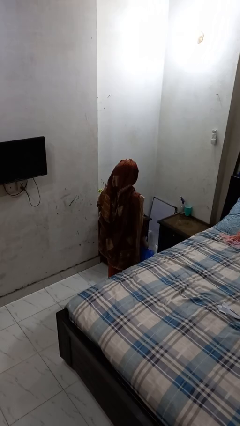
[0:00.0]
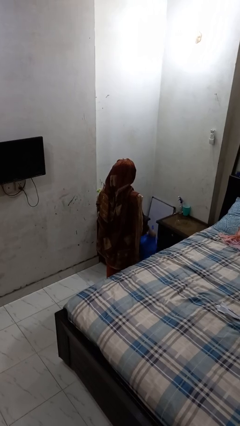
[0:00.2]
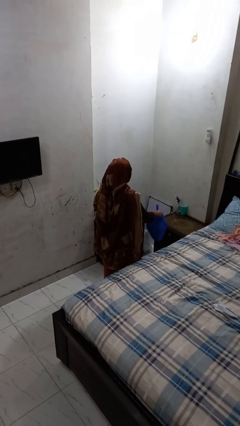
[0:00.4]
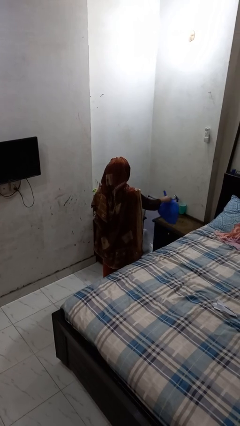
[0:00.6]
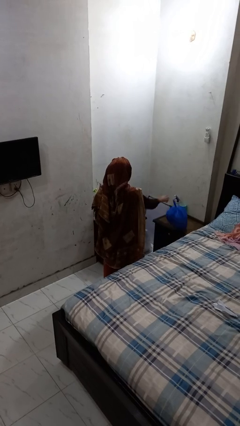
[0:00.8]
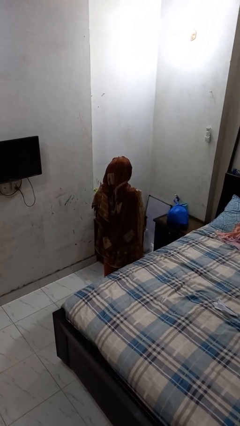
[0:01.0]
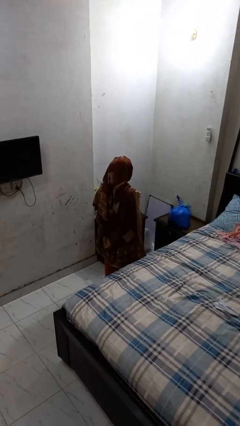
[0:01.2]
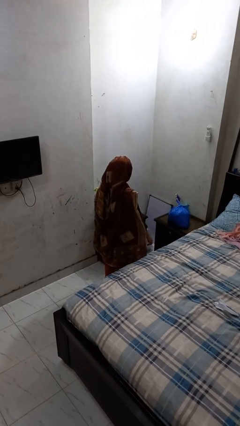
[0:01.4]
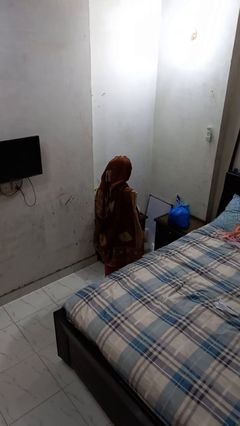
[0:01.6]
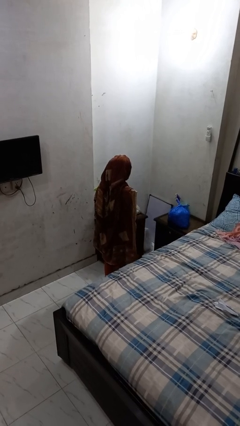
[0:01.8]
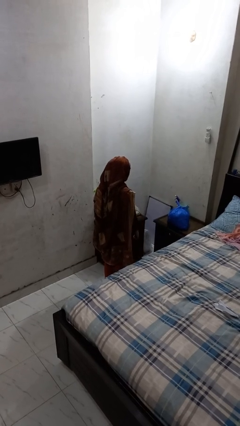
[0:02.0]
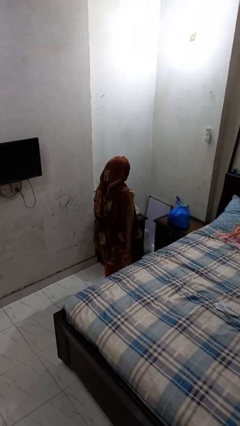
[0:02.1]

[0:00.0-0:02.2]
person throws object on table

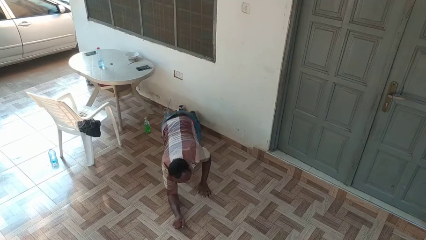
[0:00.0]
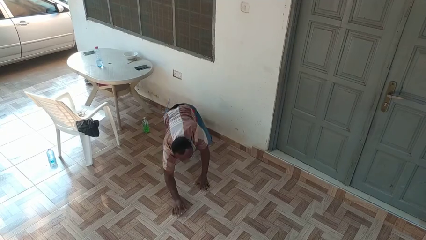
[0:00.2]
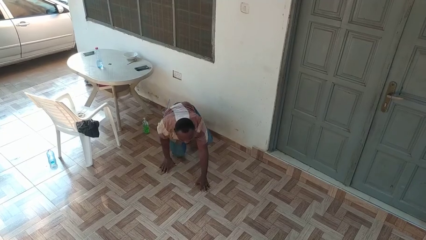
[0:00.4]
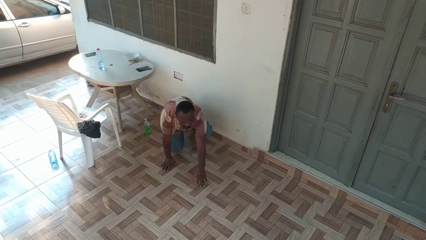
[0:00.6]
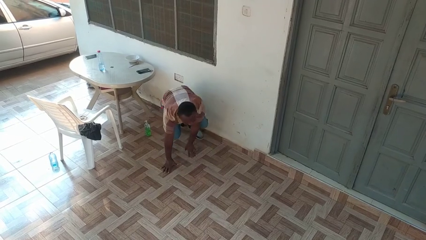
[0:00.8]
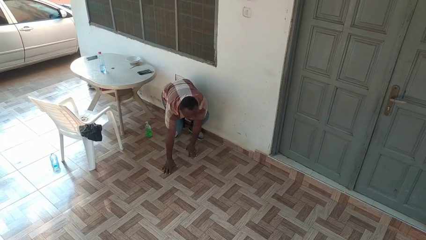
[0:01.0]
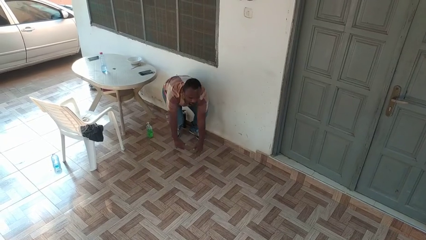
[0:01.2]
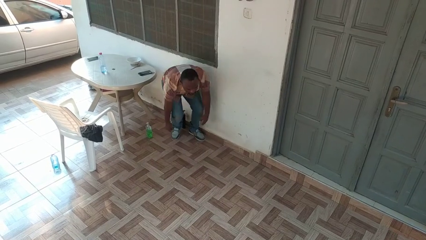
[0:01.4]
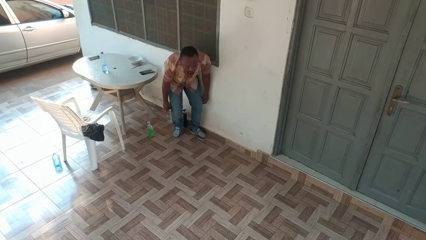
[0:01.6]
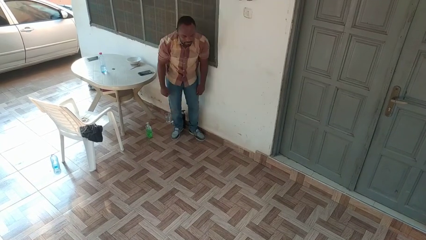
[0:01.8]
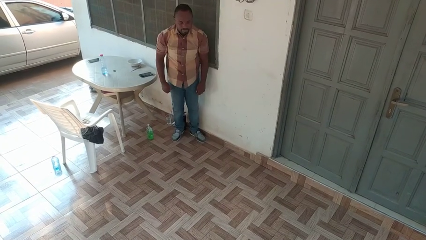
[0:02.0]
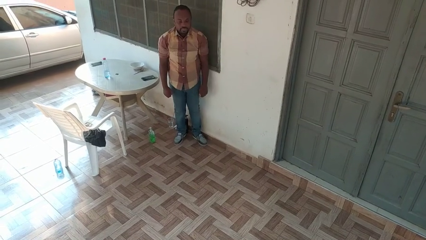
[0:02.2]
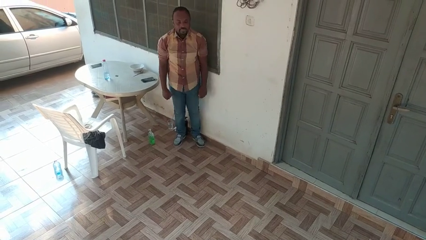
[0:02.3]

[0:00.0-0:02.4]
person stands up from floor

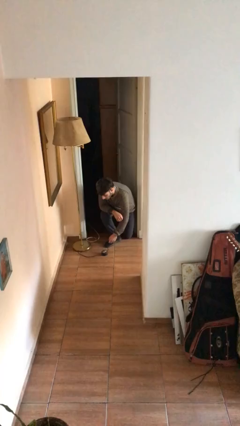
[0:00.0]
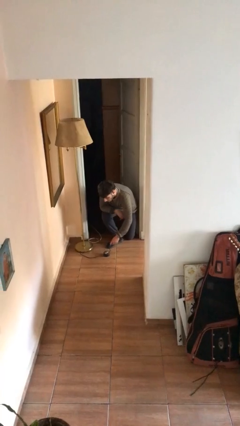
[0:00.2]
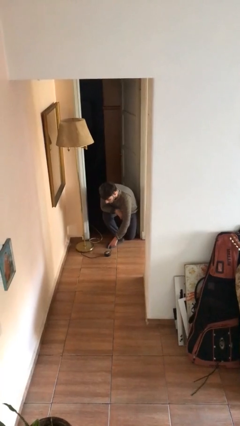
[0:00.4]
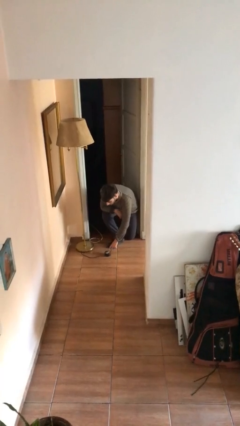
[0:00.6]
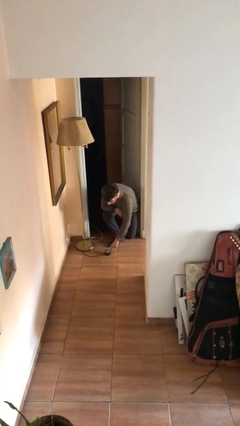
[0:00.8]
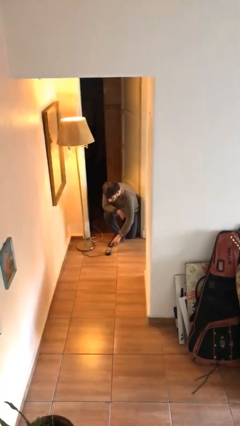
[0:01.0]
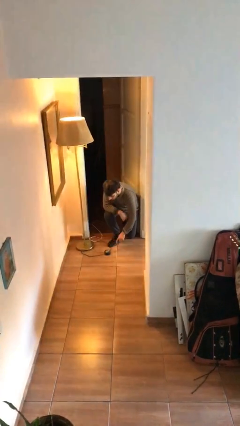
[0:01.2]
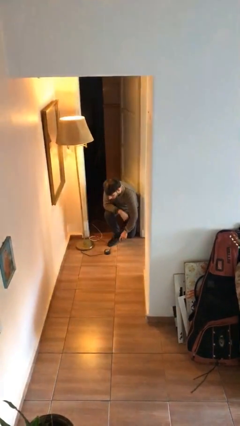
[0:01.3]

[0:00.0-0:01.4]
person turns on lamp

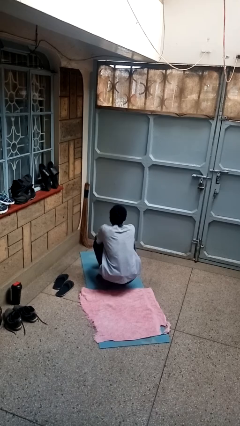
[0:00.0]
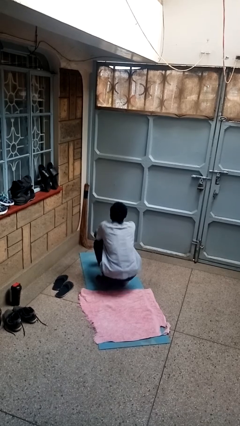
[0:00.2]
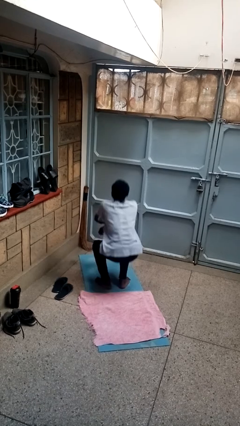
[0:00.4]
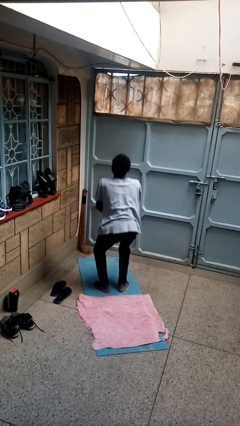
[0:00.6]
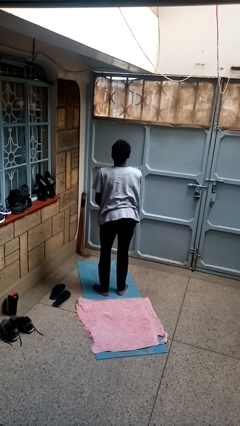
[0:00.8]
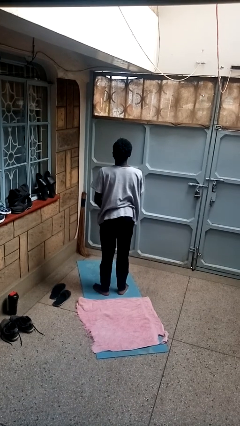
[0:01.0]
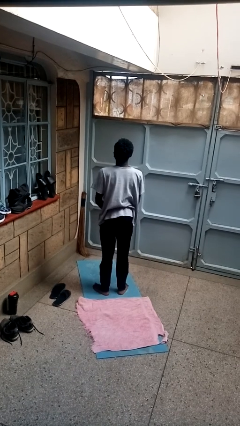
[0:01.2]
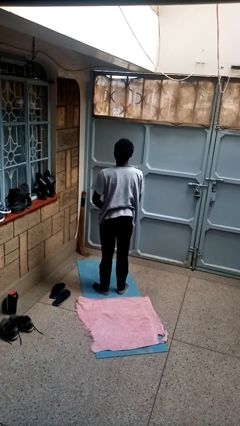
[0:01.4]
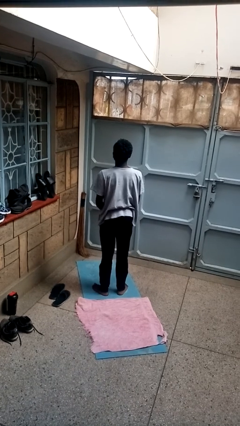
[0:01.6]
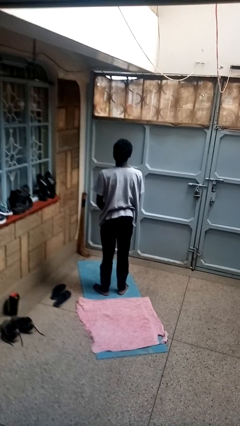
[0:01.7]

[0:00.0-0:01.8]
person stands up

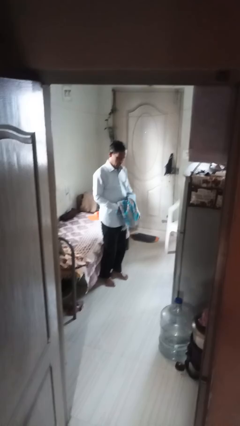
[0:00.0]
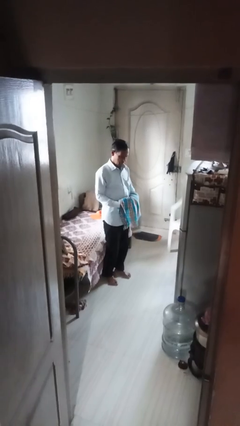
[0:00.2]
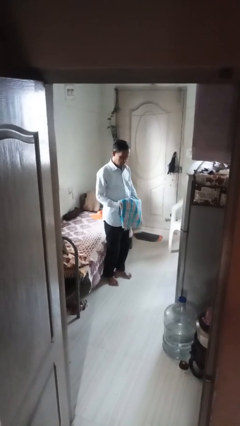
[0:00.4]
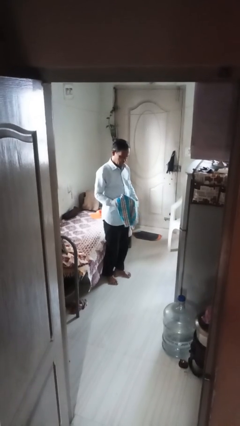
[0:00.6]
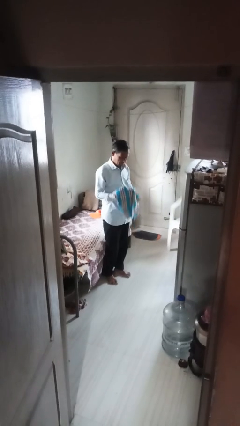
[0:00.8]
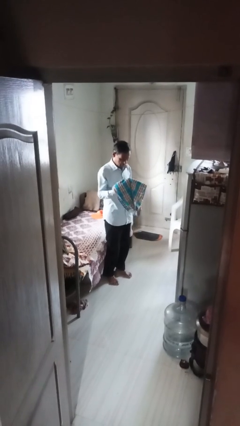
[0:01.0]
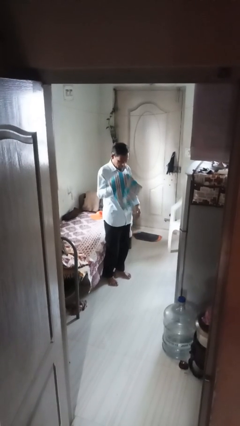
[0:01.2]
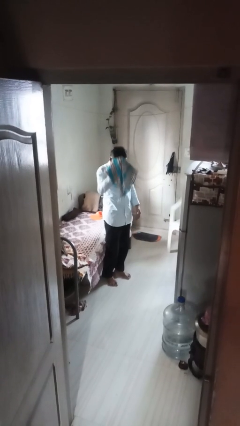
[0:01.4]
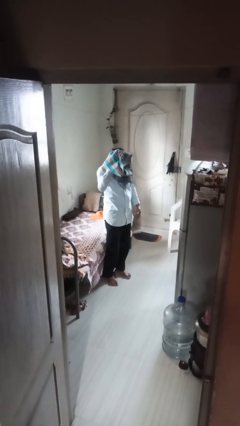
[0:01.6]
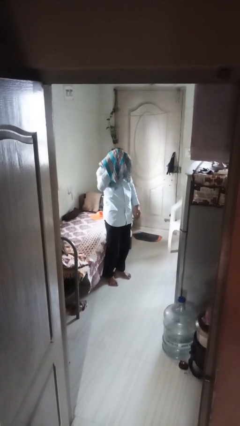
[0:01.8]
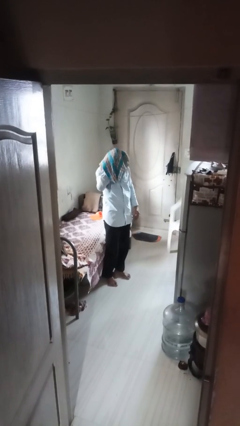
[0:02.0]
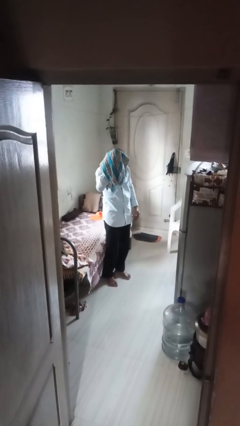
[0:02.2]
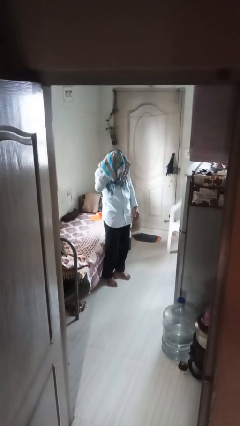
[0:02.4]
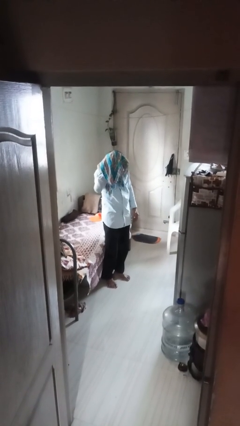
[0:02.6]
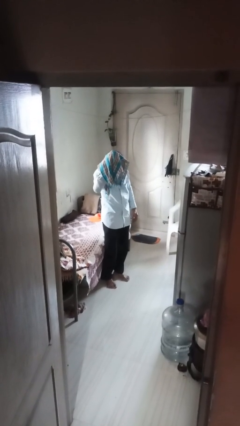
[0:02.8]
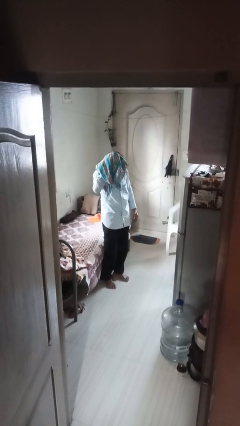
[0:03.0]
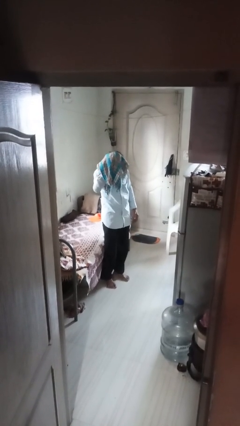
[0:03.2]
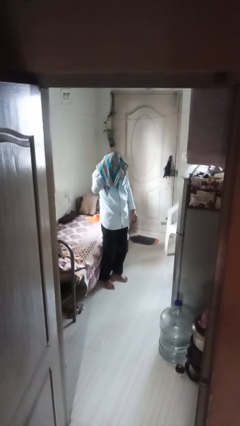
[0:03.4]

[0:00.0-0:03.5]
person dries hair with towel

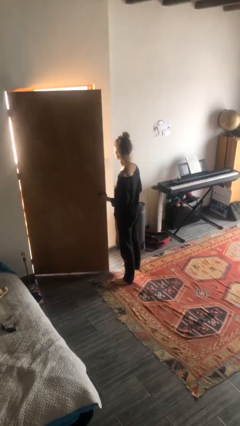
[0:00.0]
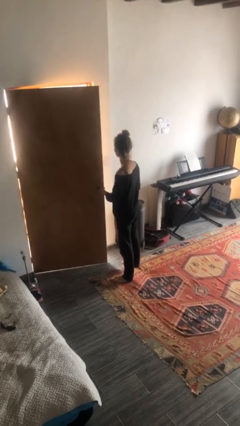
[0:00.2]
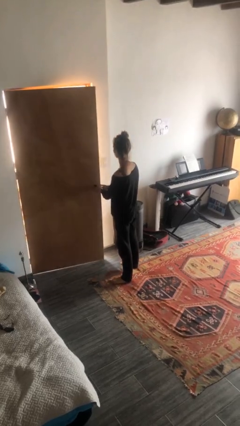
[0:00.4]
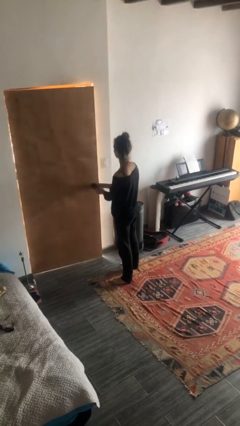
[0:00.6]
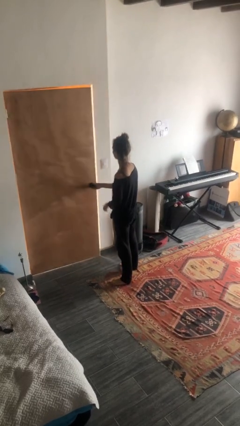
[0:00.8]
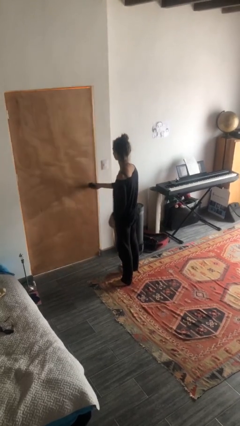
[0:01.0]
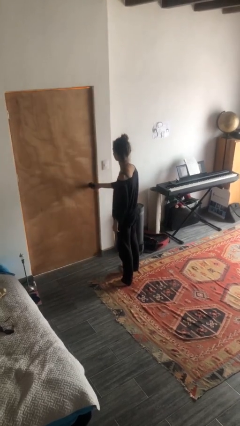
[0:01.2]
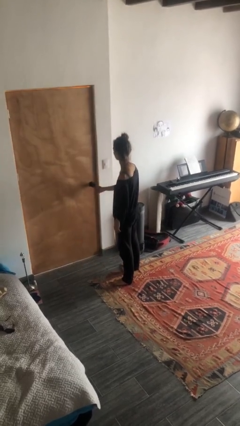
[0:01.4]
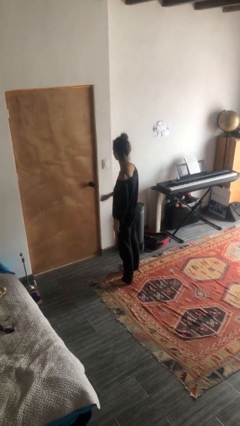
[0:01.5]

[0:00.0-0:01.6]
person closes facility door

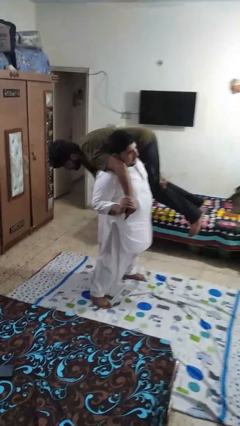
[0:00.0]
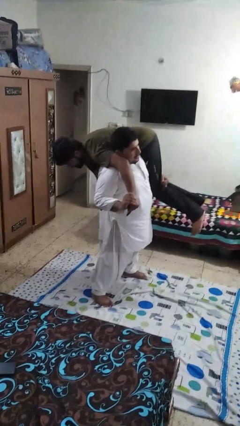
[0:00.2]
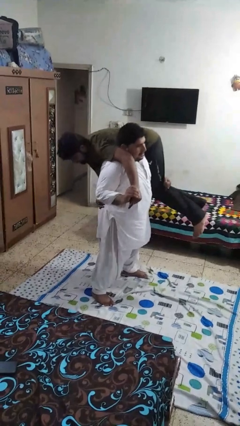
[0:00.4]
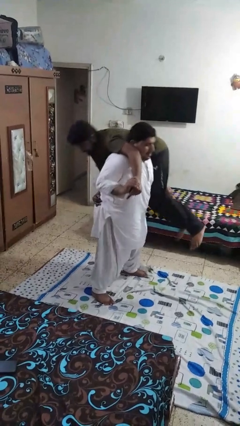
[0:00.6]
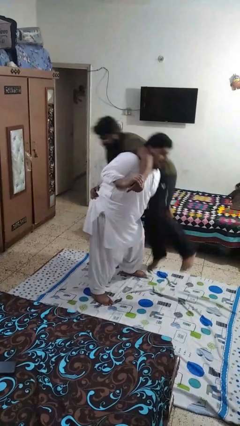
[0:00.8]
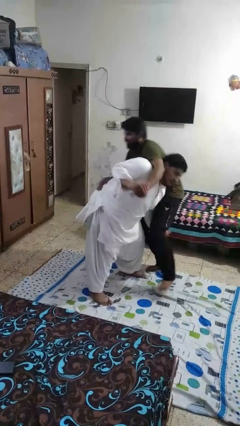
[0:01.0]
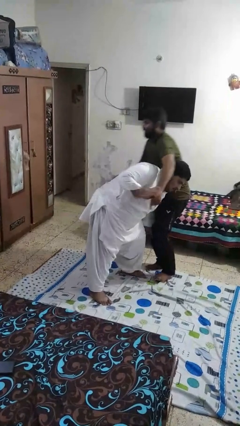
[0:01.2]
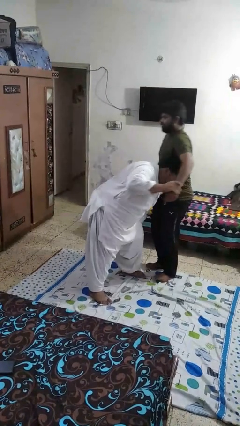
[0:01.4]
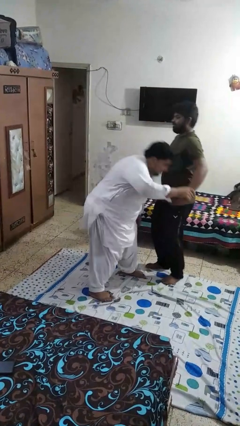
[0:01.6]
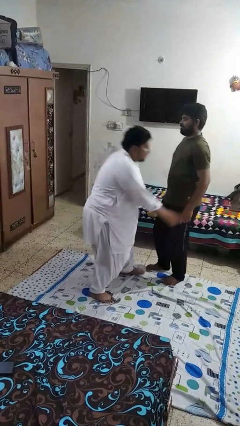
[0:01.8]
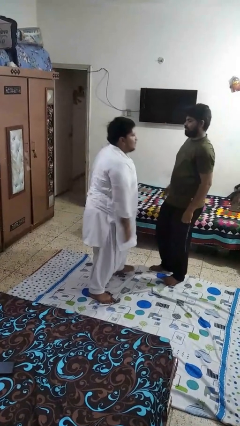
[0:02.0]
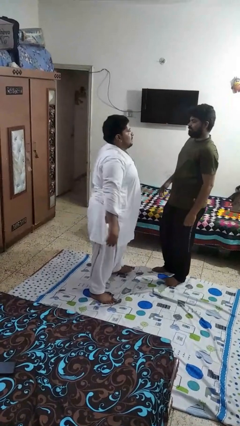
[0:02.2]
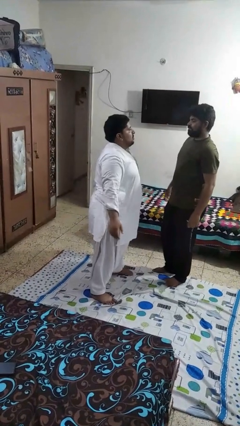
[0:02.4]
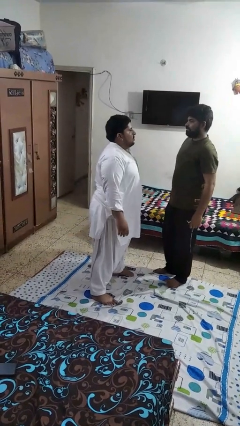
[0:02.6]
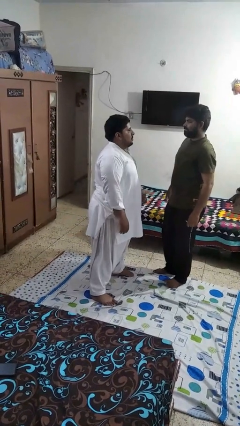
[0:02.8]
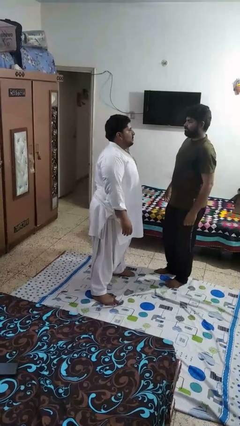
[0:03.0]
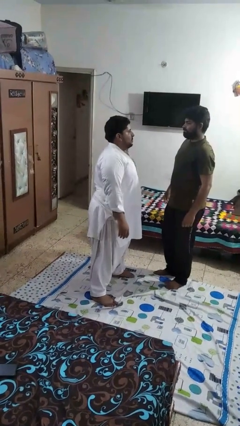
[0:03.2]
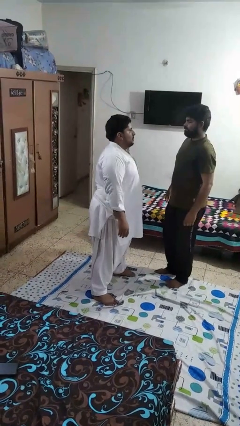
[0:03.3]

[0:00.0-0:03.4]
person puts down person

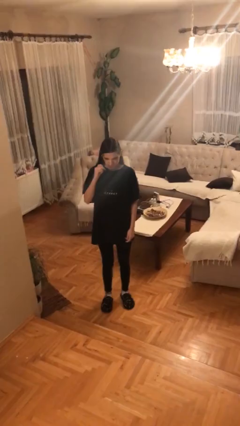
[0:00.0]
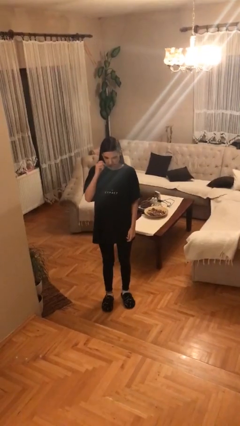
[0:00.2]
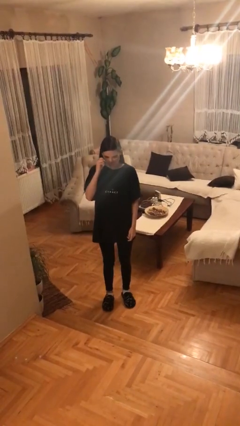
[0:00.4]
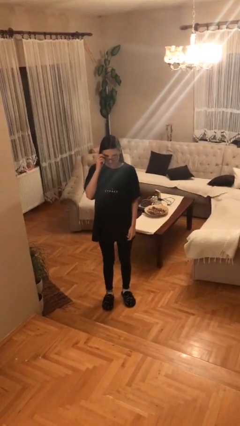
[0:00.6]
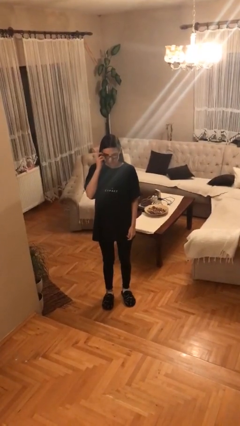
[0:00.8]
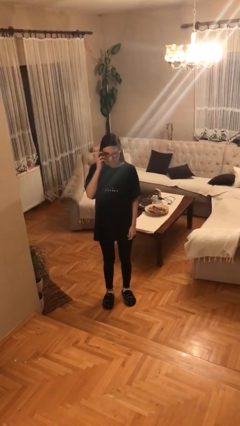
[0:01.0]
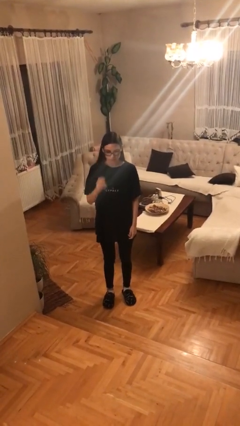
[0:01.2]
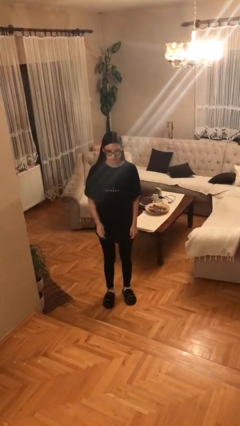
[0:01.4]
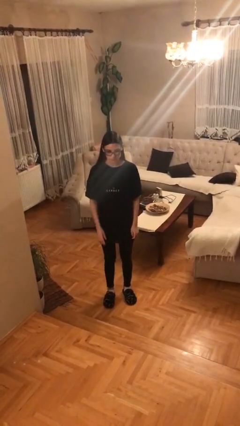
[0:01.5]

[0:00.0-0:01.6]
person puts on glasses
